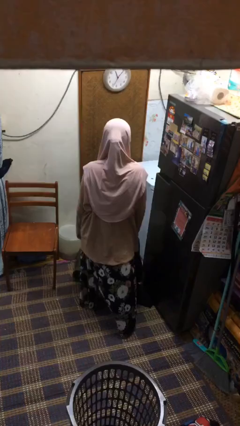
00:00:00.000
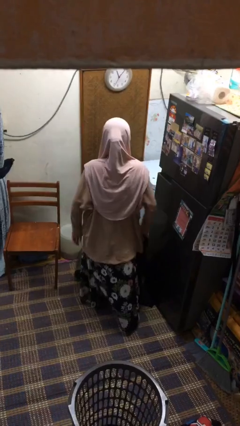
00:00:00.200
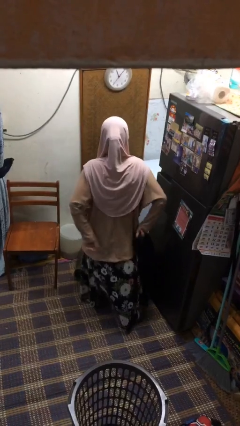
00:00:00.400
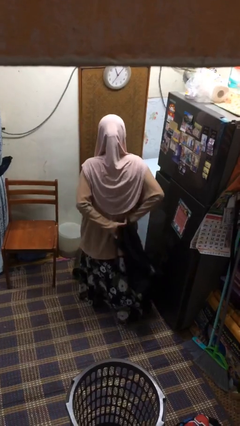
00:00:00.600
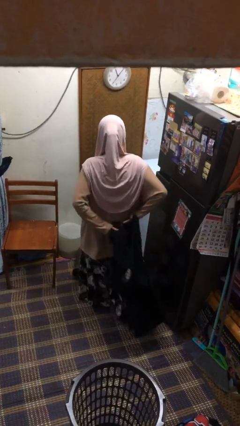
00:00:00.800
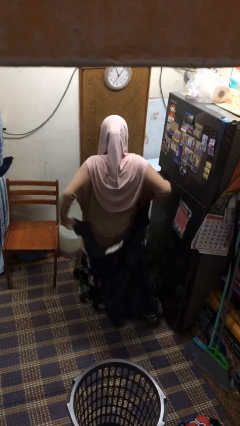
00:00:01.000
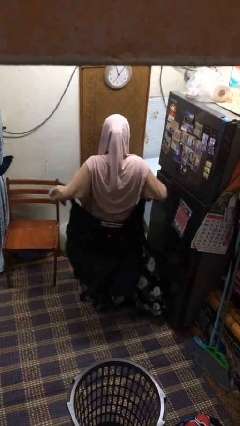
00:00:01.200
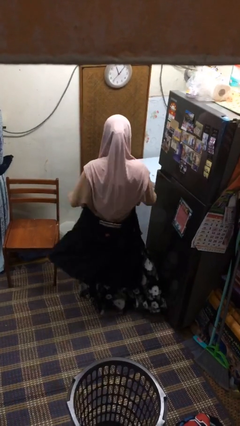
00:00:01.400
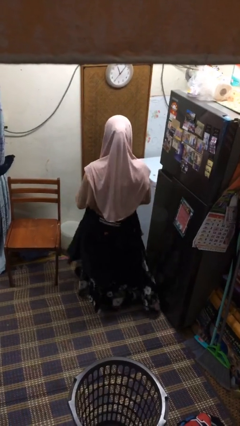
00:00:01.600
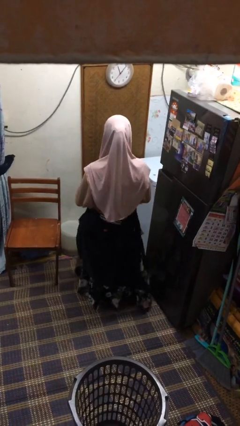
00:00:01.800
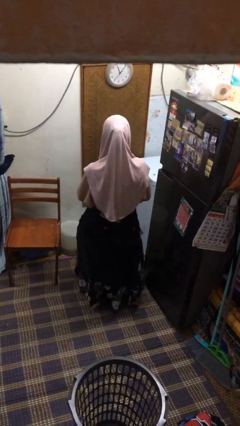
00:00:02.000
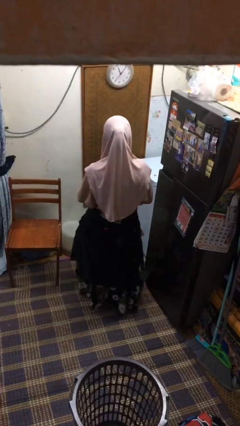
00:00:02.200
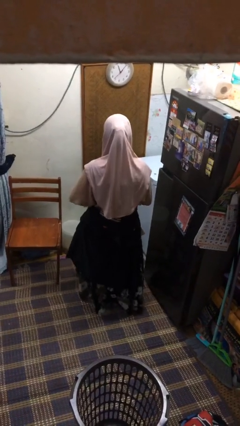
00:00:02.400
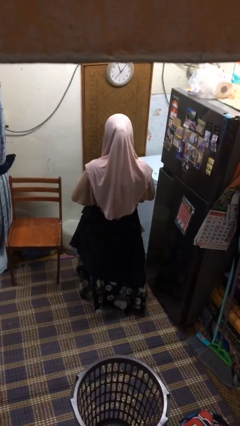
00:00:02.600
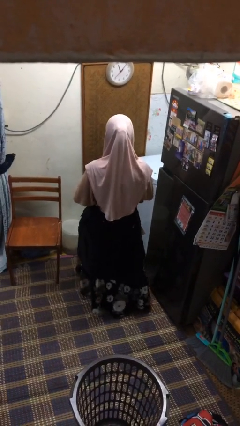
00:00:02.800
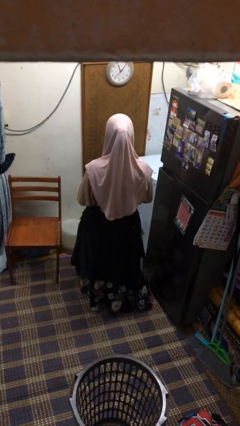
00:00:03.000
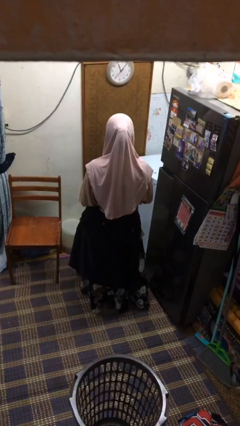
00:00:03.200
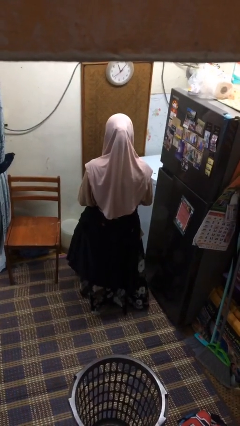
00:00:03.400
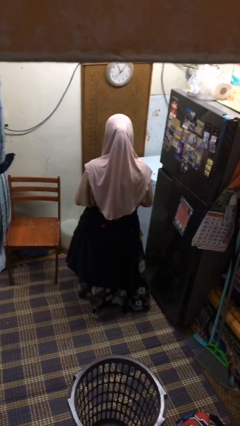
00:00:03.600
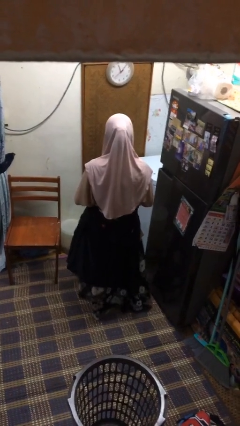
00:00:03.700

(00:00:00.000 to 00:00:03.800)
person ties jacket around waist

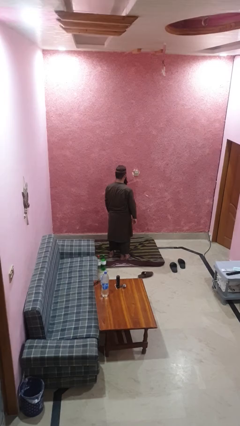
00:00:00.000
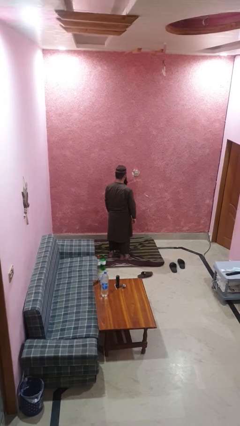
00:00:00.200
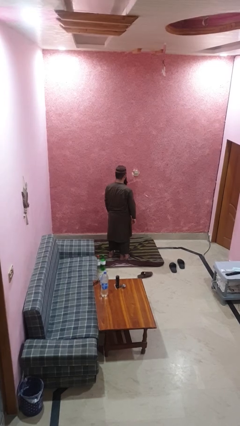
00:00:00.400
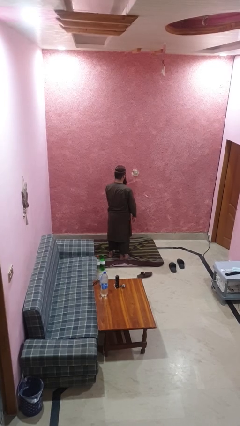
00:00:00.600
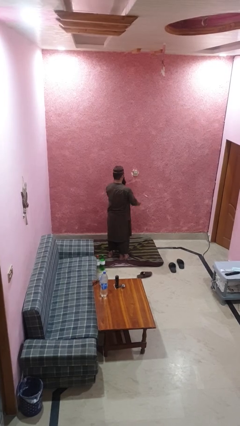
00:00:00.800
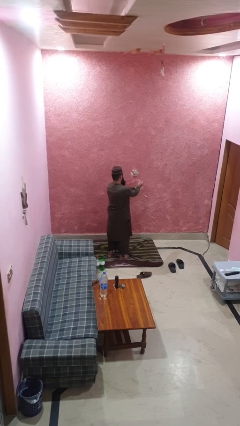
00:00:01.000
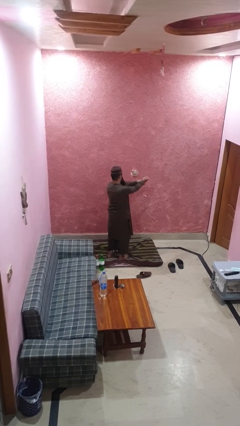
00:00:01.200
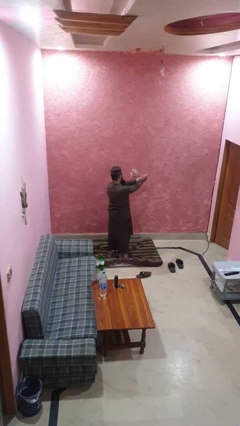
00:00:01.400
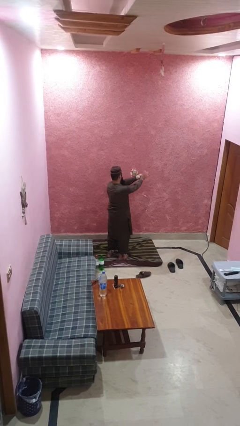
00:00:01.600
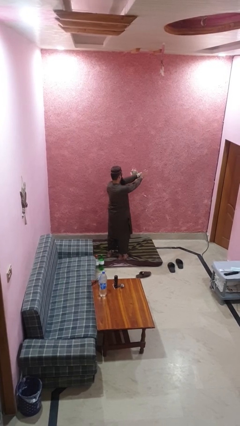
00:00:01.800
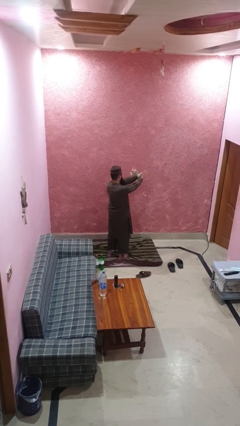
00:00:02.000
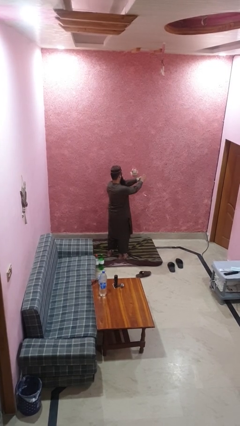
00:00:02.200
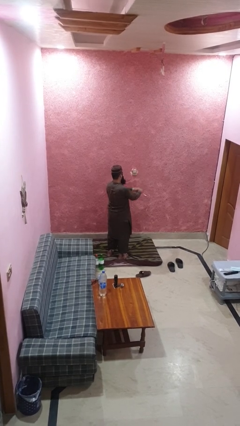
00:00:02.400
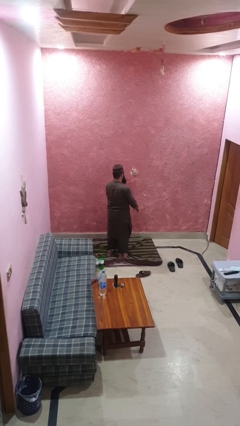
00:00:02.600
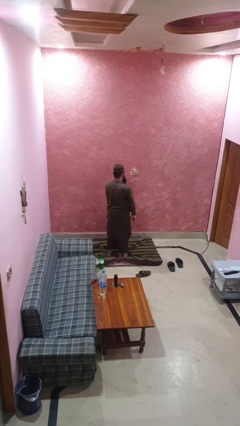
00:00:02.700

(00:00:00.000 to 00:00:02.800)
person snaps fingers

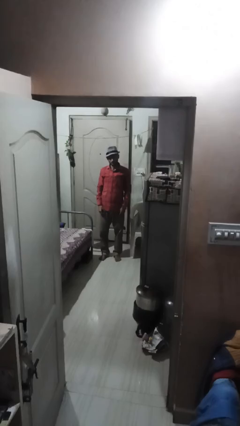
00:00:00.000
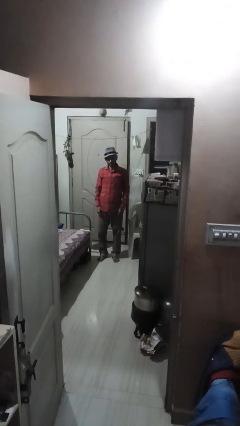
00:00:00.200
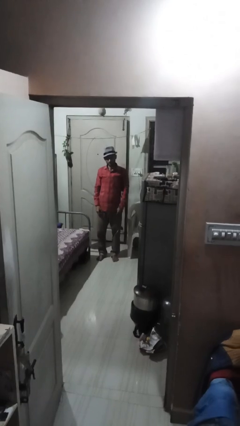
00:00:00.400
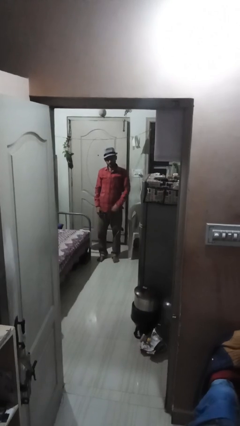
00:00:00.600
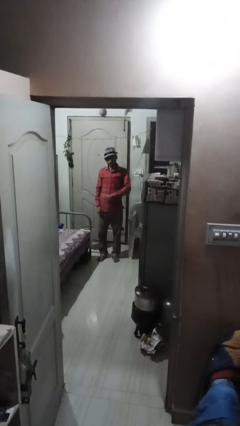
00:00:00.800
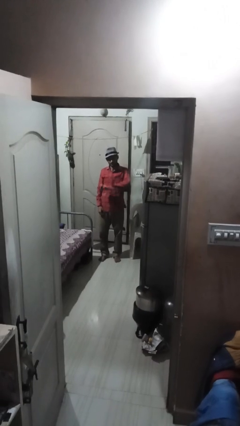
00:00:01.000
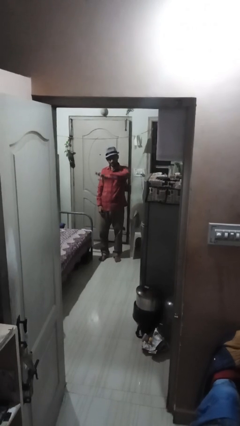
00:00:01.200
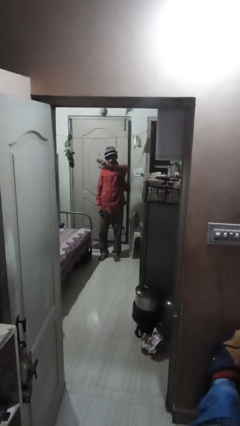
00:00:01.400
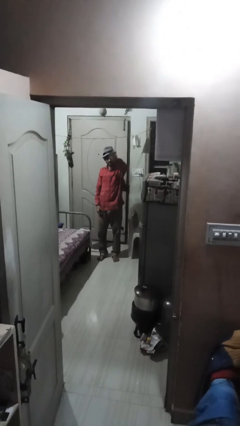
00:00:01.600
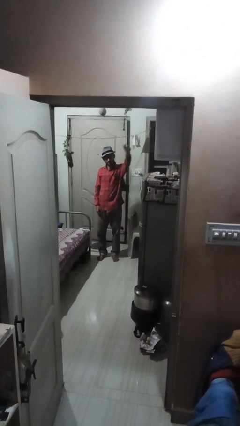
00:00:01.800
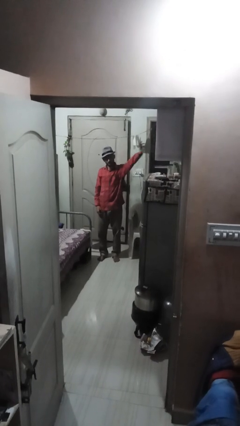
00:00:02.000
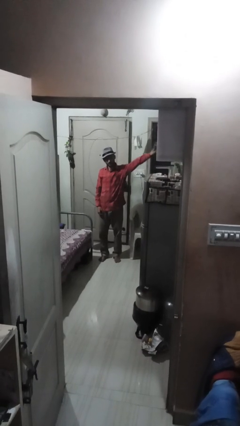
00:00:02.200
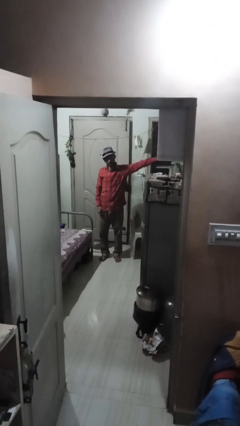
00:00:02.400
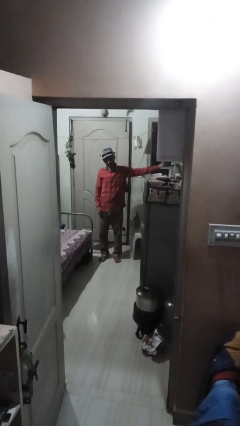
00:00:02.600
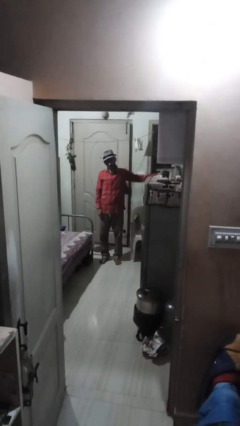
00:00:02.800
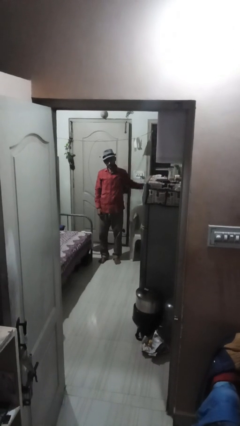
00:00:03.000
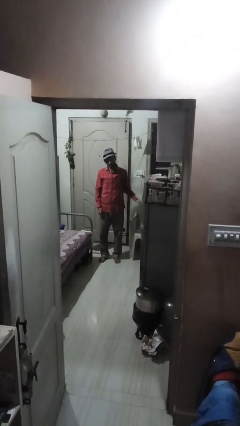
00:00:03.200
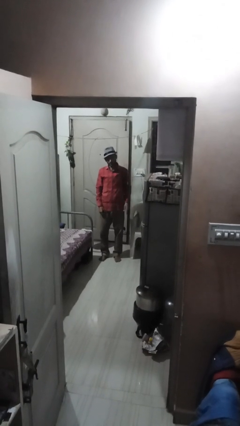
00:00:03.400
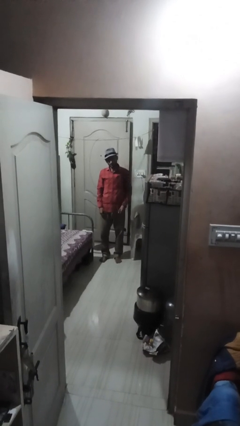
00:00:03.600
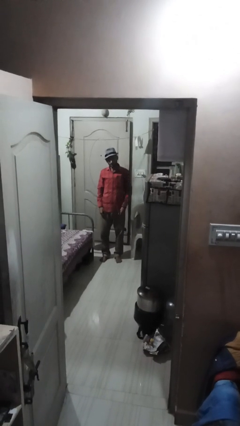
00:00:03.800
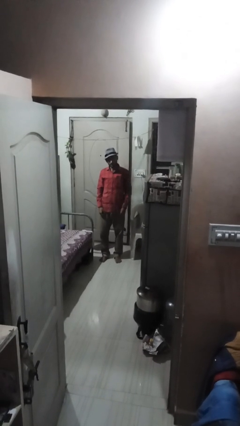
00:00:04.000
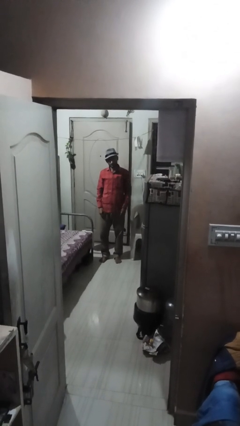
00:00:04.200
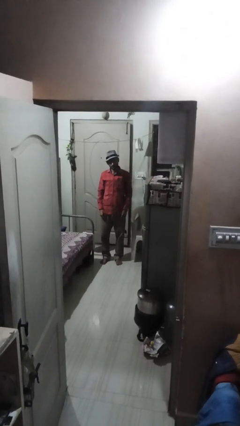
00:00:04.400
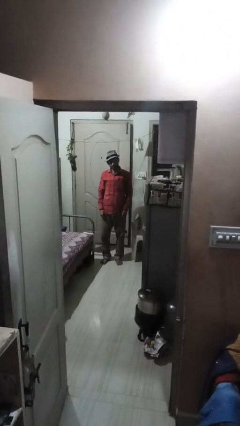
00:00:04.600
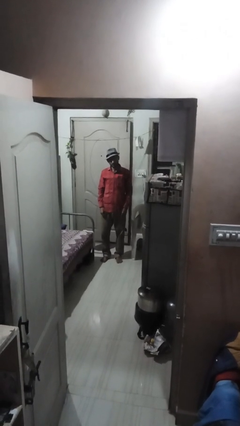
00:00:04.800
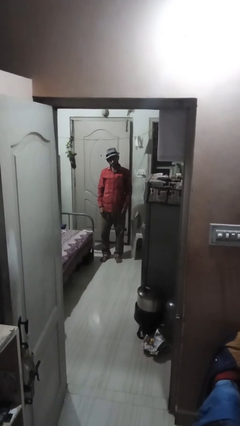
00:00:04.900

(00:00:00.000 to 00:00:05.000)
person gestures swipe left

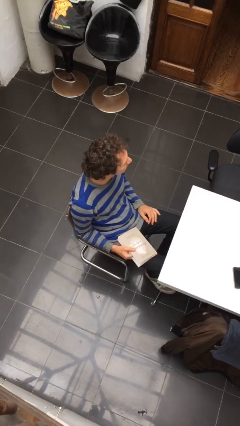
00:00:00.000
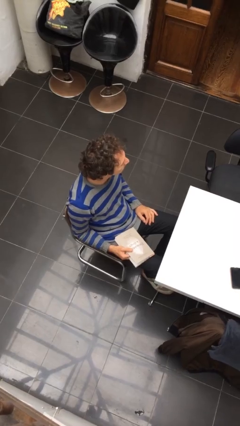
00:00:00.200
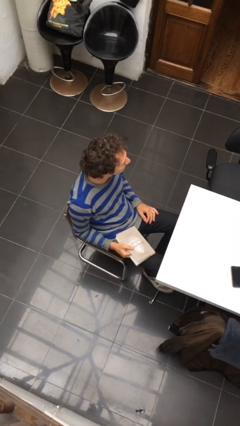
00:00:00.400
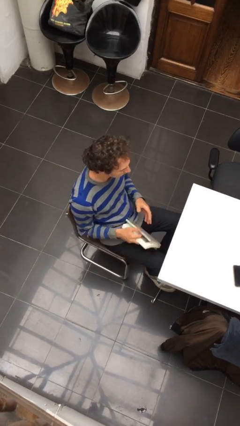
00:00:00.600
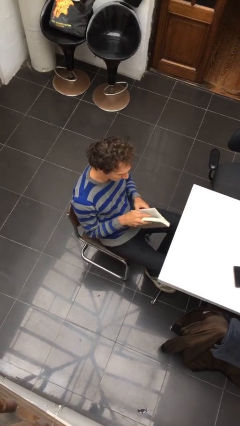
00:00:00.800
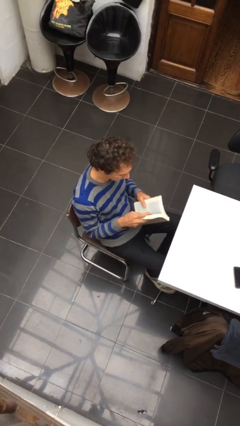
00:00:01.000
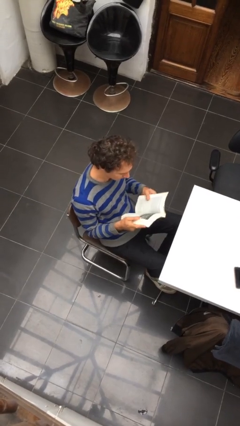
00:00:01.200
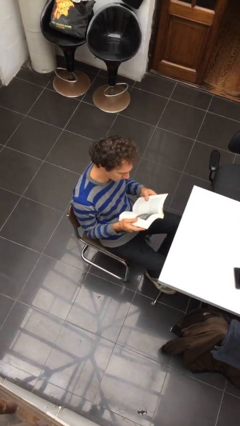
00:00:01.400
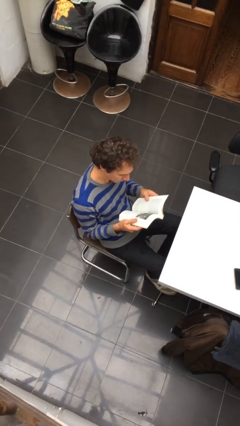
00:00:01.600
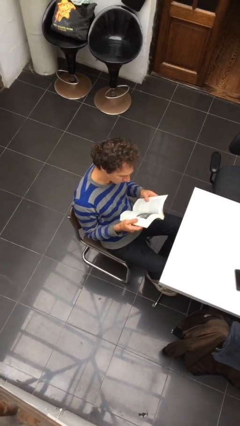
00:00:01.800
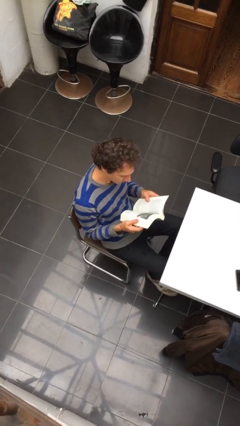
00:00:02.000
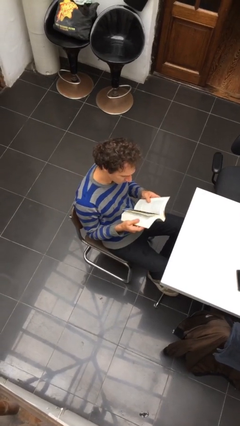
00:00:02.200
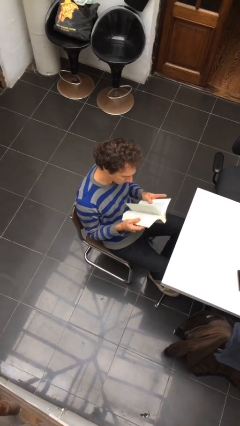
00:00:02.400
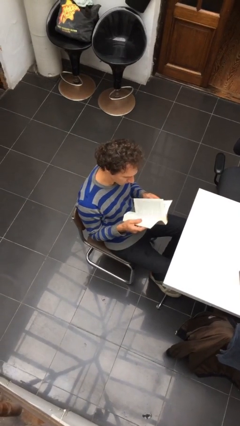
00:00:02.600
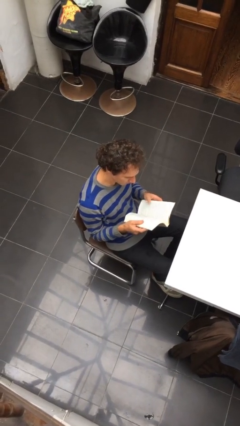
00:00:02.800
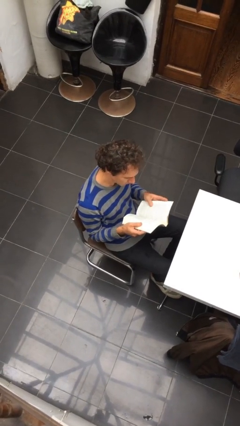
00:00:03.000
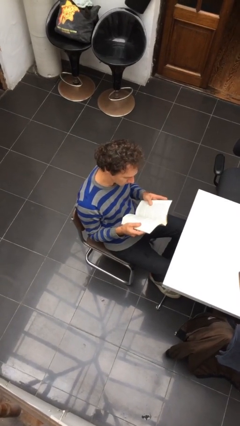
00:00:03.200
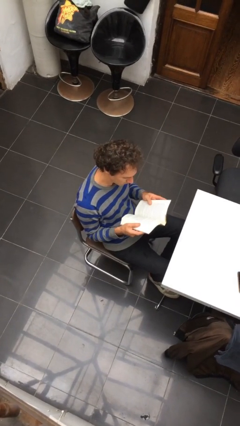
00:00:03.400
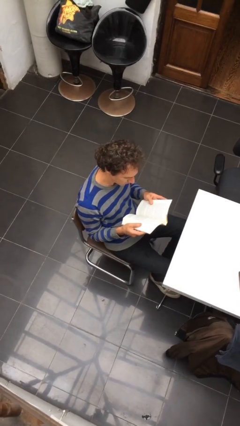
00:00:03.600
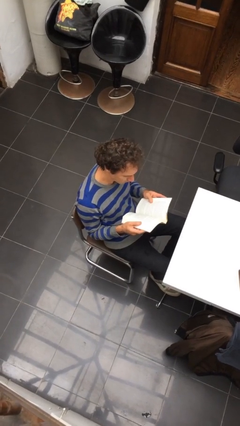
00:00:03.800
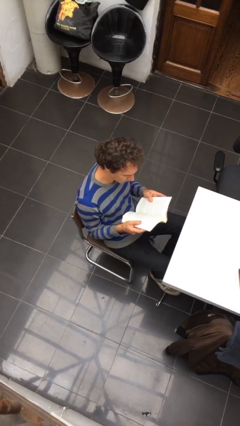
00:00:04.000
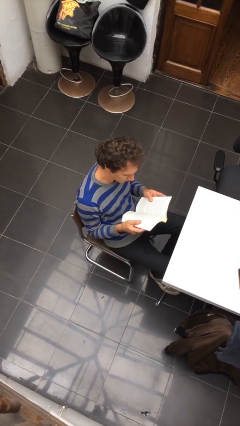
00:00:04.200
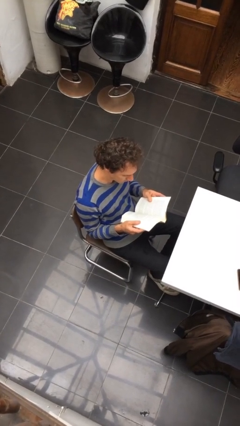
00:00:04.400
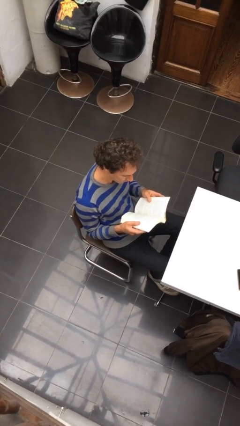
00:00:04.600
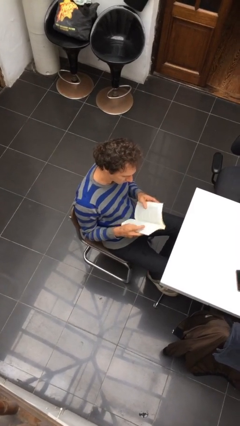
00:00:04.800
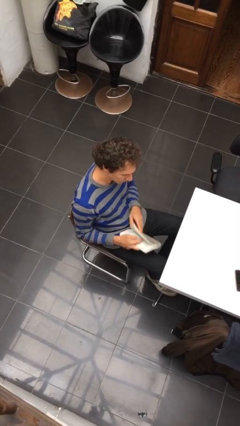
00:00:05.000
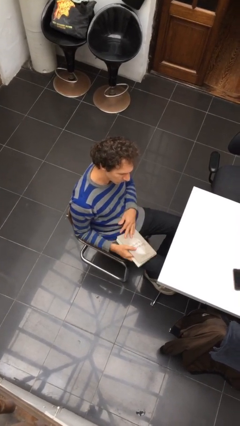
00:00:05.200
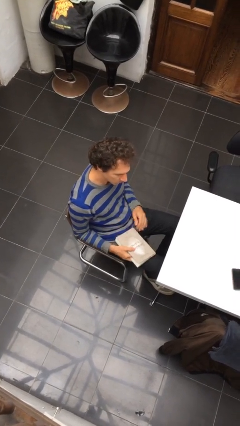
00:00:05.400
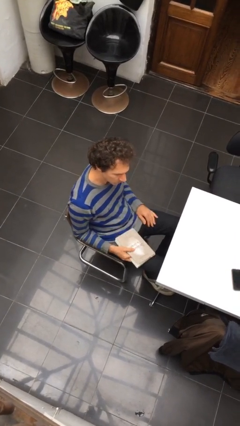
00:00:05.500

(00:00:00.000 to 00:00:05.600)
person reads document

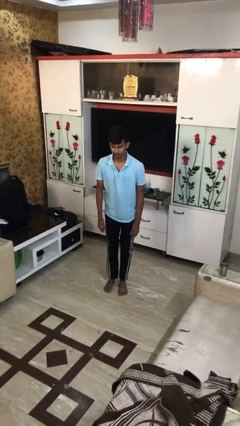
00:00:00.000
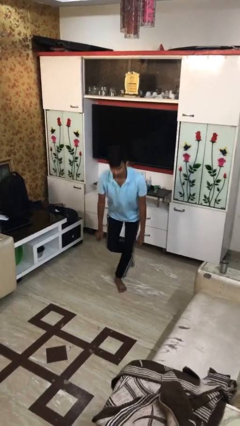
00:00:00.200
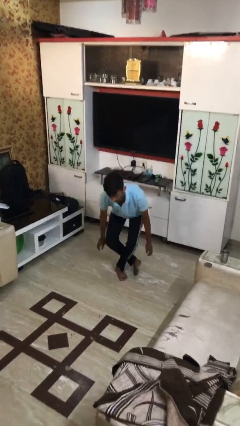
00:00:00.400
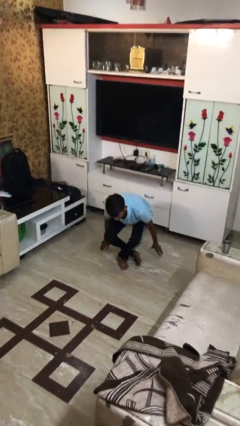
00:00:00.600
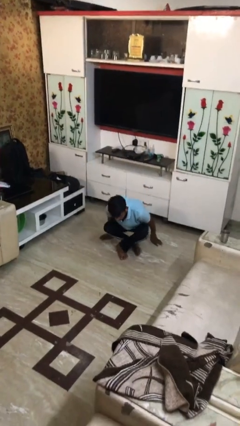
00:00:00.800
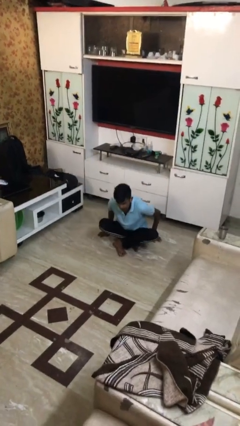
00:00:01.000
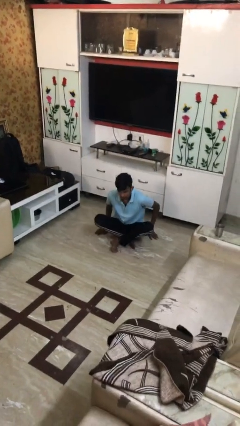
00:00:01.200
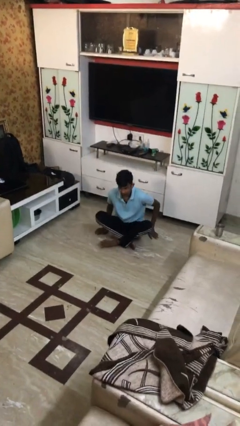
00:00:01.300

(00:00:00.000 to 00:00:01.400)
person sits crisscross
